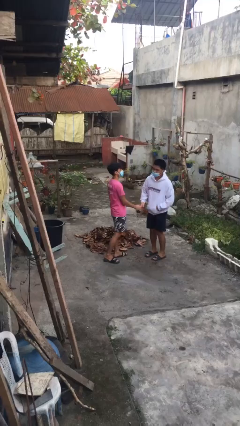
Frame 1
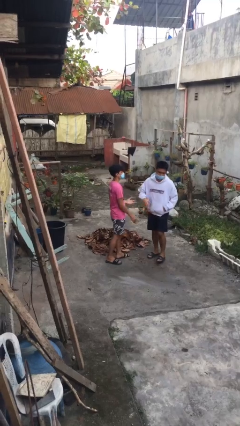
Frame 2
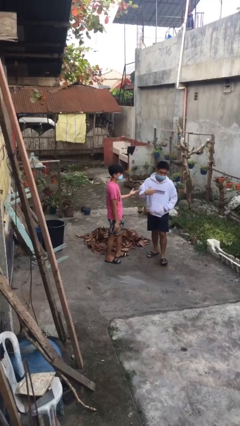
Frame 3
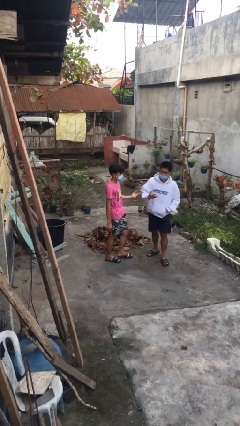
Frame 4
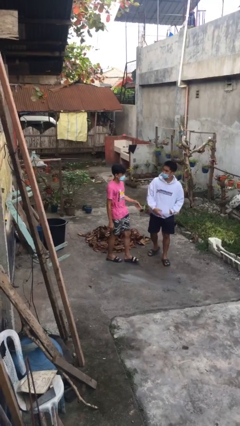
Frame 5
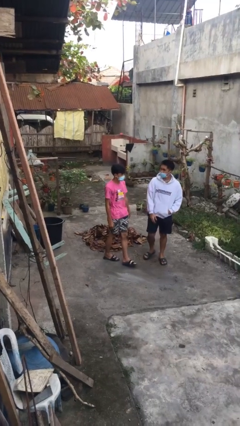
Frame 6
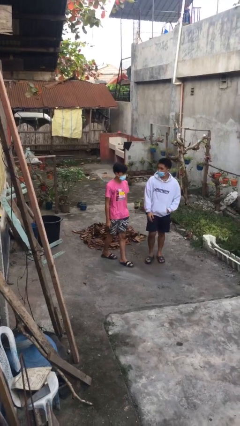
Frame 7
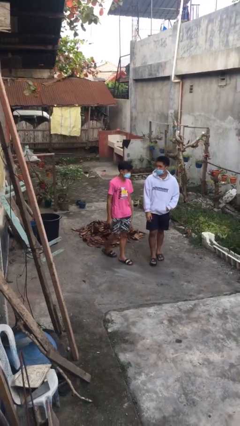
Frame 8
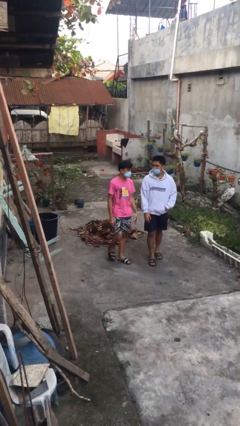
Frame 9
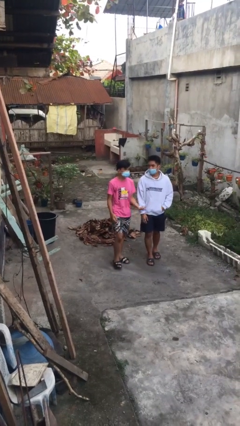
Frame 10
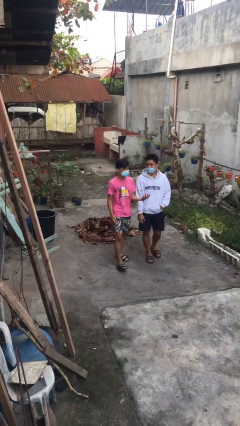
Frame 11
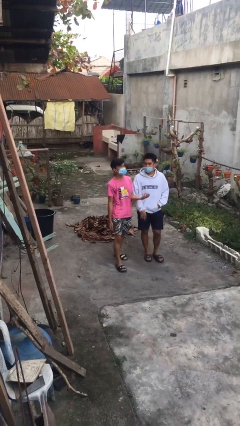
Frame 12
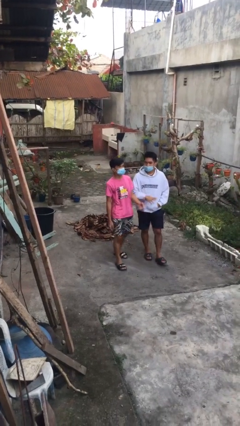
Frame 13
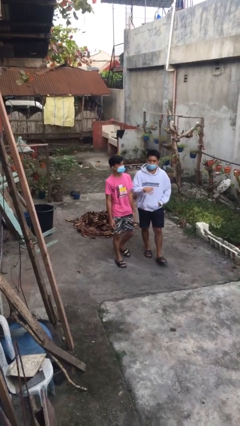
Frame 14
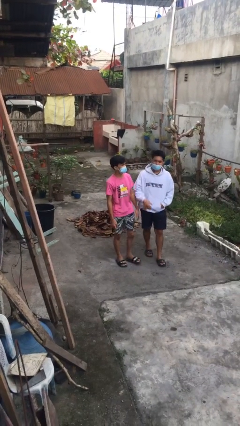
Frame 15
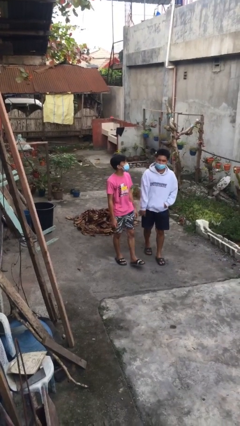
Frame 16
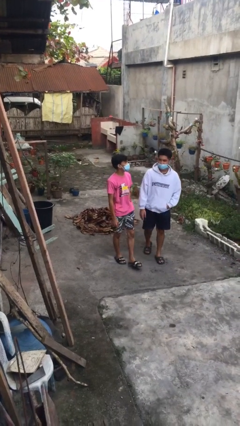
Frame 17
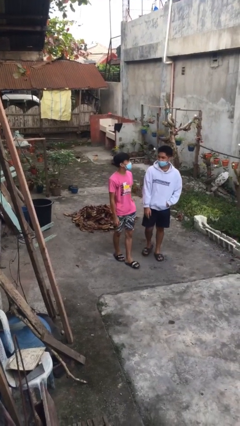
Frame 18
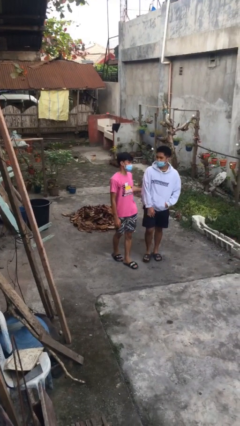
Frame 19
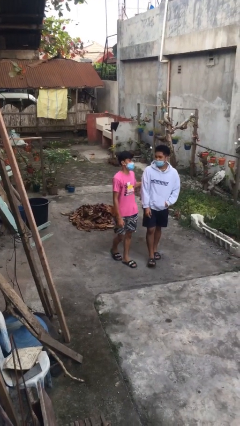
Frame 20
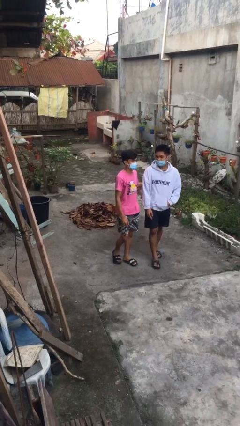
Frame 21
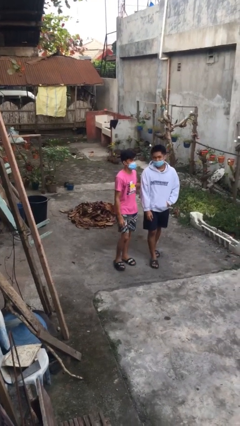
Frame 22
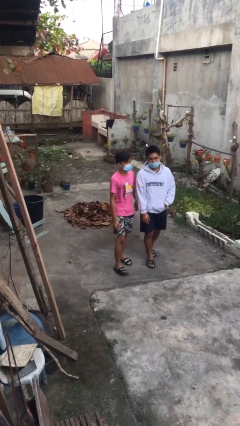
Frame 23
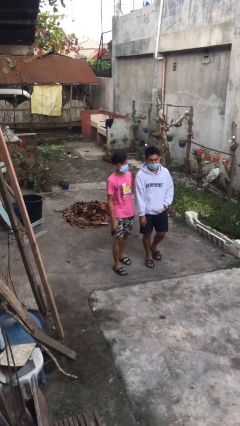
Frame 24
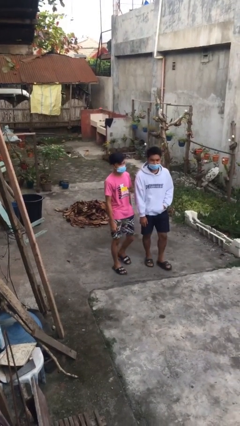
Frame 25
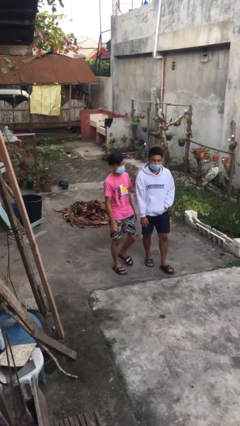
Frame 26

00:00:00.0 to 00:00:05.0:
person talks to person

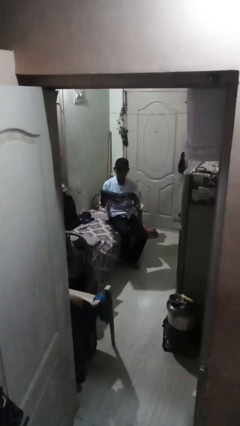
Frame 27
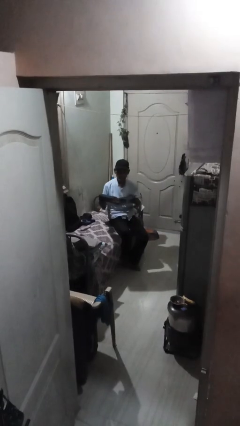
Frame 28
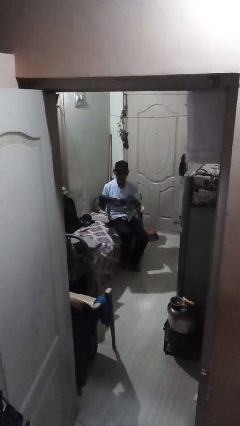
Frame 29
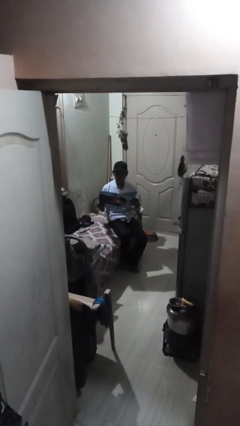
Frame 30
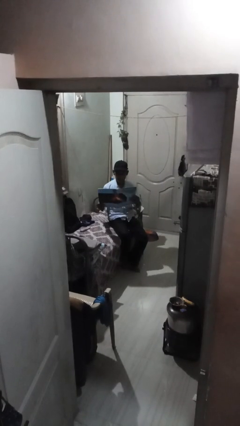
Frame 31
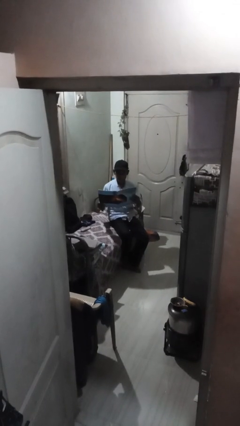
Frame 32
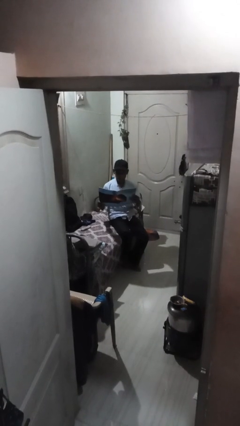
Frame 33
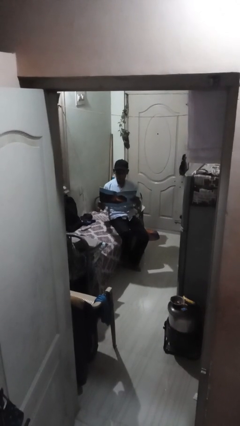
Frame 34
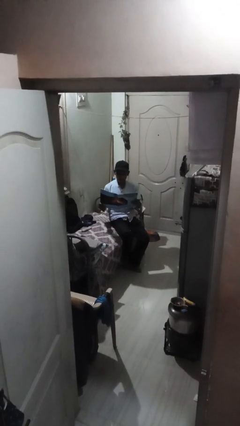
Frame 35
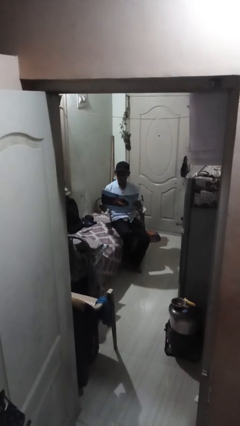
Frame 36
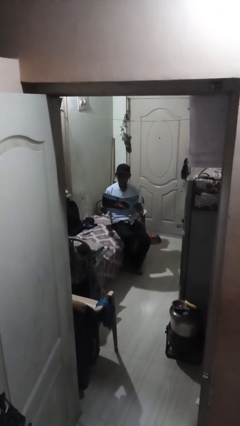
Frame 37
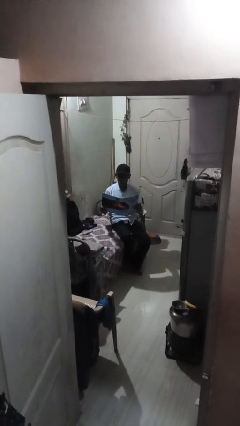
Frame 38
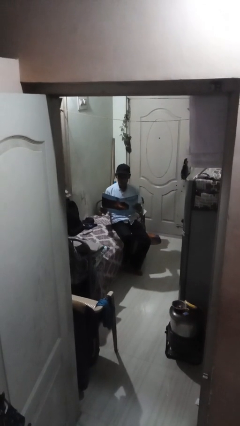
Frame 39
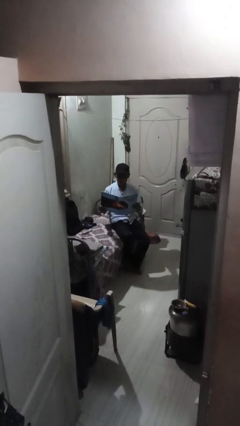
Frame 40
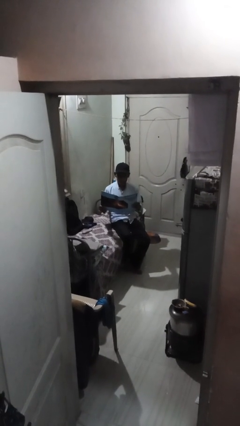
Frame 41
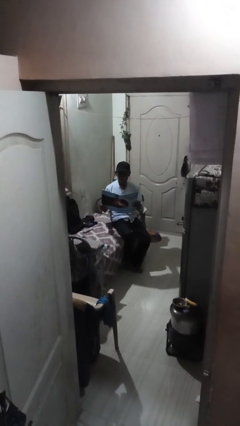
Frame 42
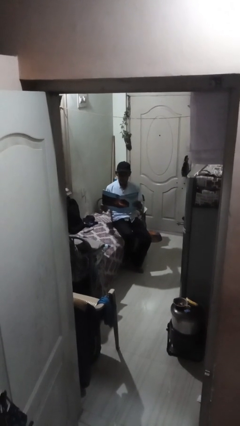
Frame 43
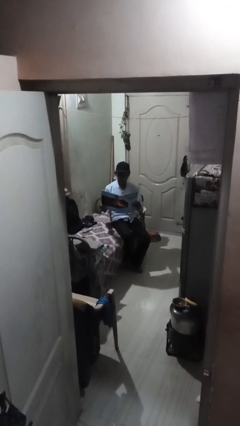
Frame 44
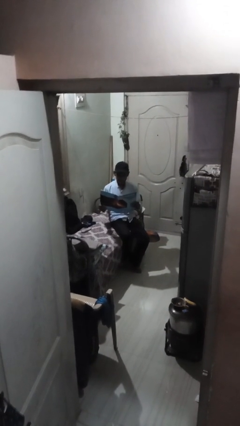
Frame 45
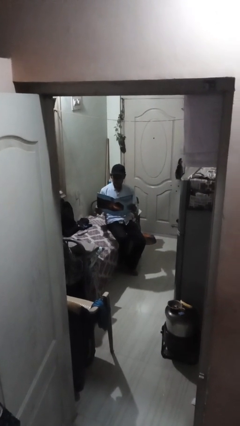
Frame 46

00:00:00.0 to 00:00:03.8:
person reads magazine

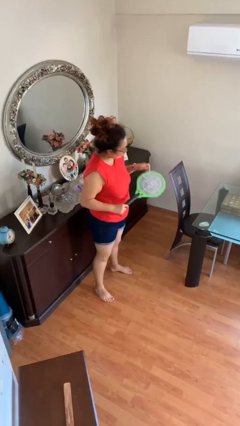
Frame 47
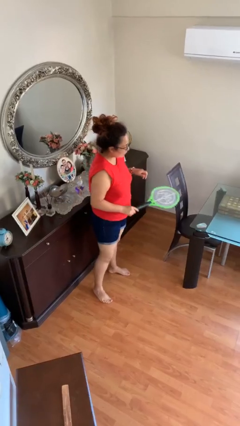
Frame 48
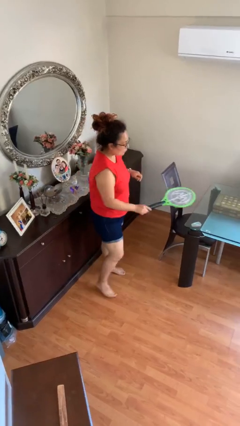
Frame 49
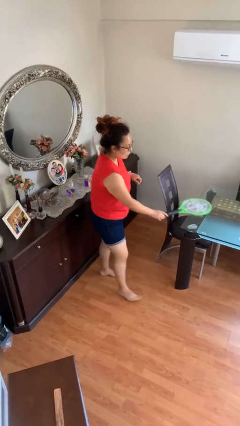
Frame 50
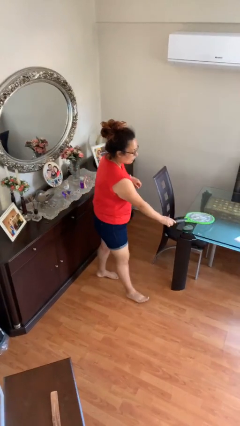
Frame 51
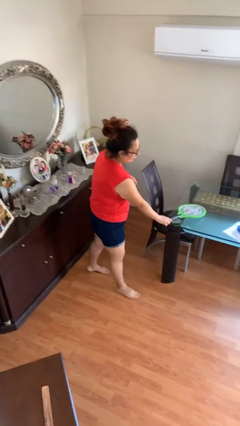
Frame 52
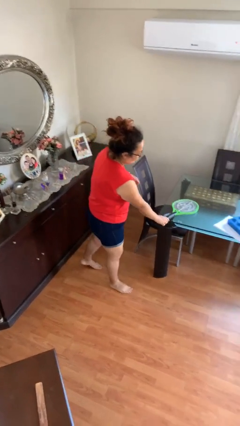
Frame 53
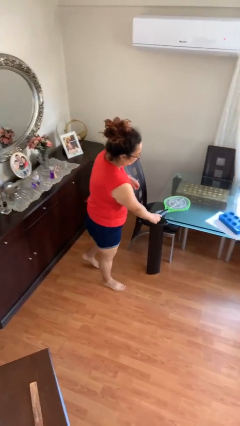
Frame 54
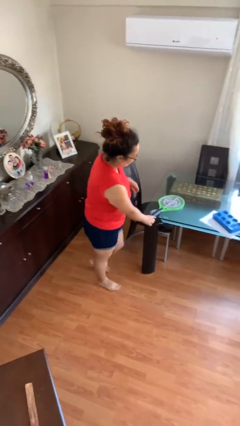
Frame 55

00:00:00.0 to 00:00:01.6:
person puts down object on table

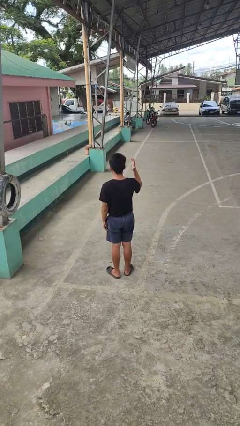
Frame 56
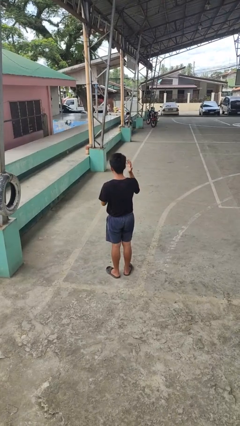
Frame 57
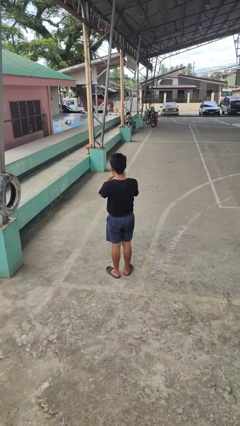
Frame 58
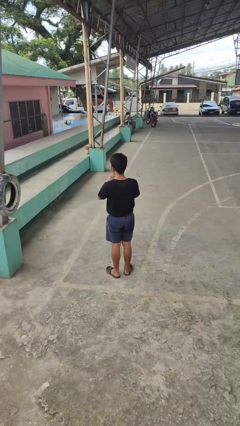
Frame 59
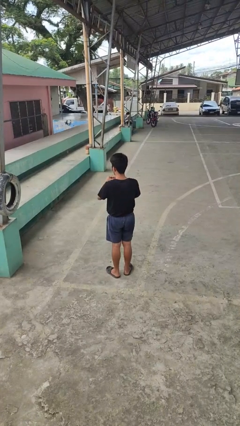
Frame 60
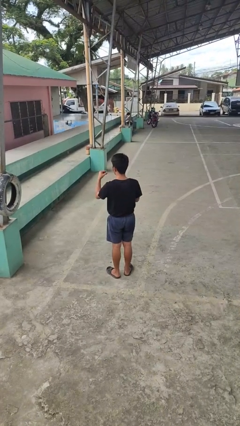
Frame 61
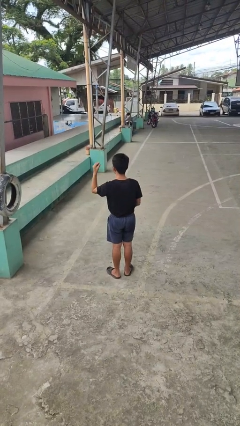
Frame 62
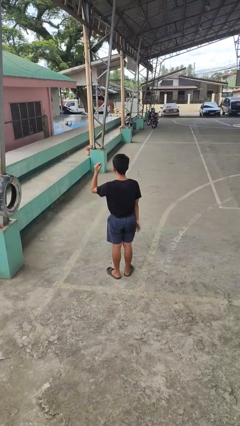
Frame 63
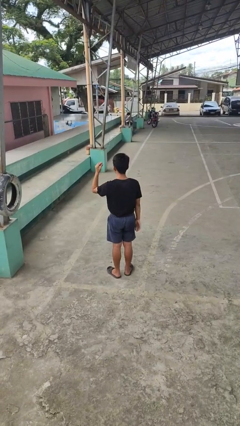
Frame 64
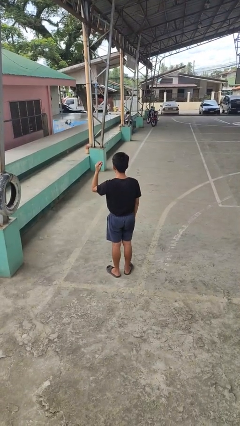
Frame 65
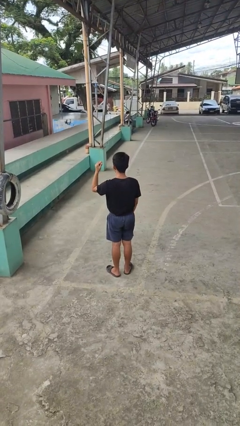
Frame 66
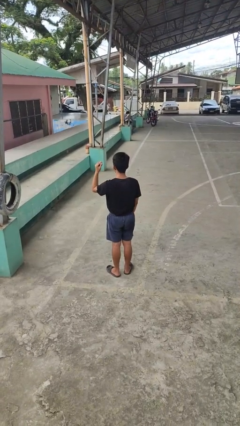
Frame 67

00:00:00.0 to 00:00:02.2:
person takes off ring

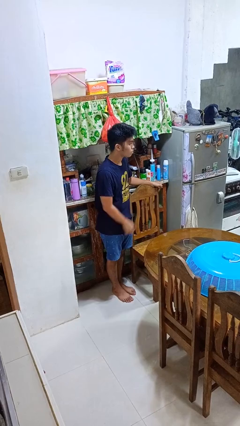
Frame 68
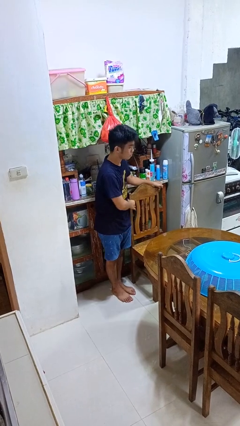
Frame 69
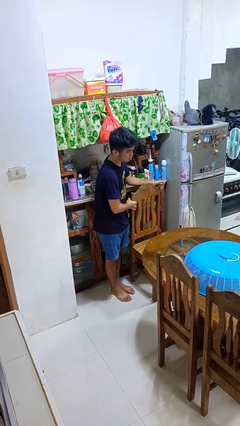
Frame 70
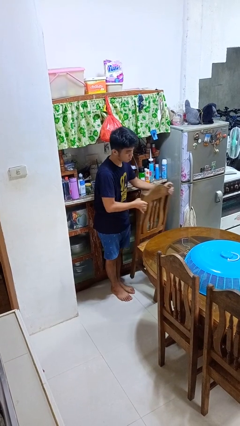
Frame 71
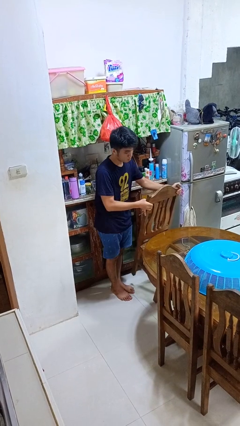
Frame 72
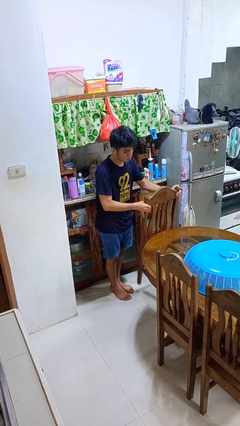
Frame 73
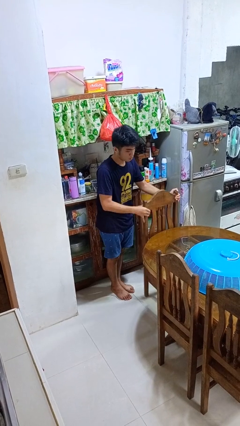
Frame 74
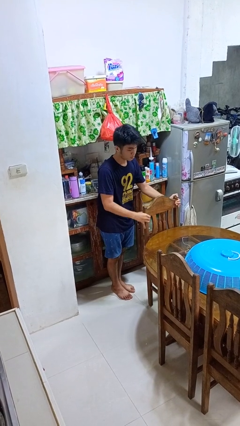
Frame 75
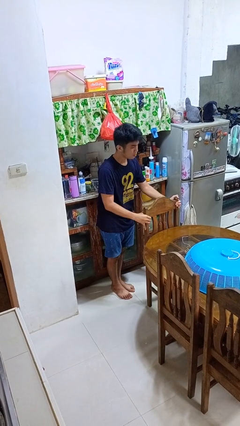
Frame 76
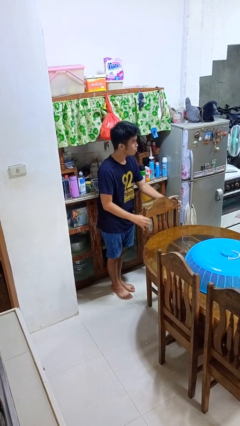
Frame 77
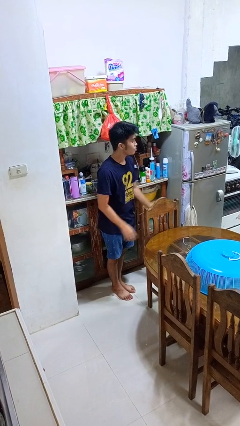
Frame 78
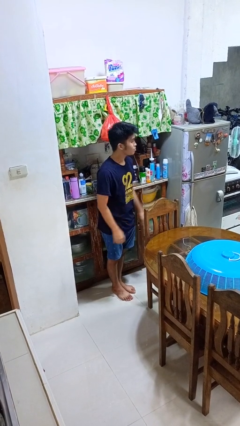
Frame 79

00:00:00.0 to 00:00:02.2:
person pushes in chair

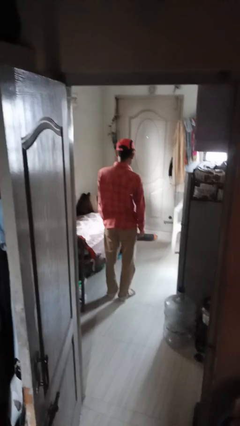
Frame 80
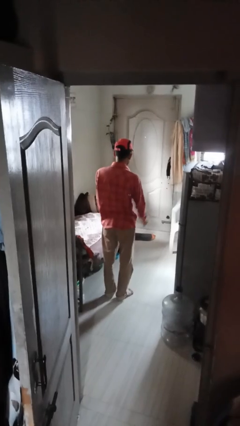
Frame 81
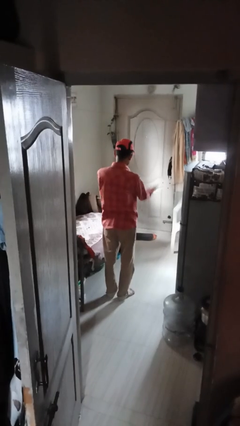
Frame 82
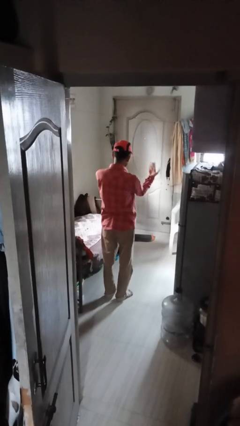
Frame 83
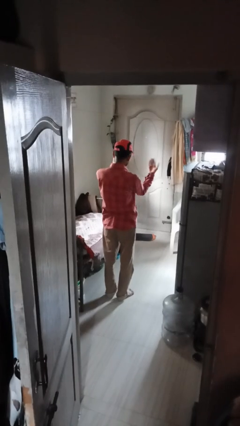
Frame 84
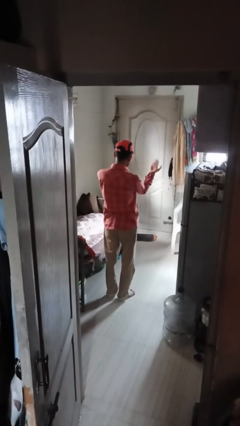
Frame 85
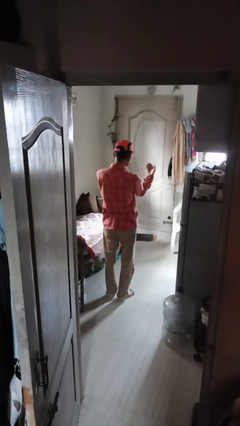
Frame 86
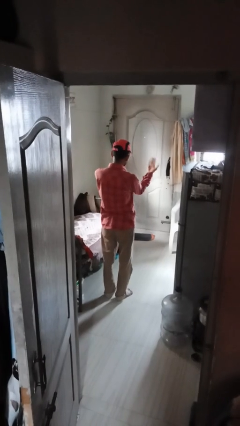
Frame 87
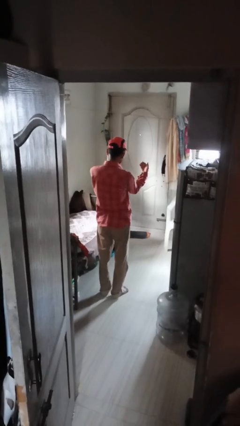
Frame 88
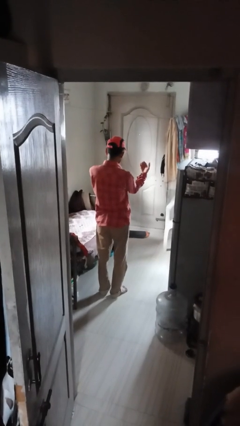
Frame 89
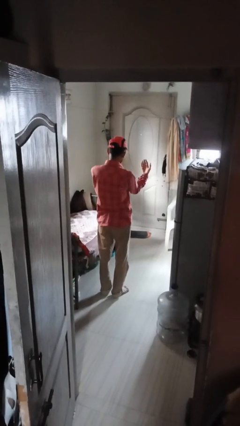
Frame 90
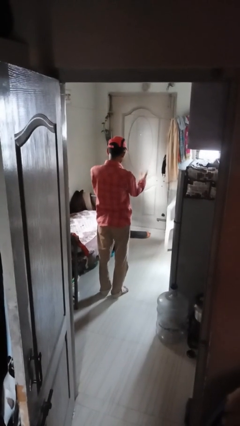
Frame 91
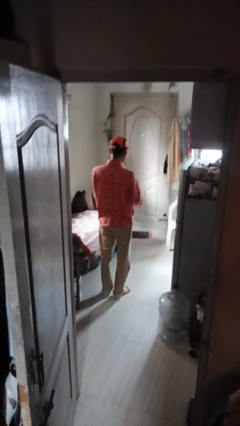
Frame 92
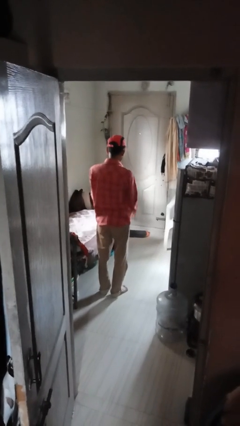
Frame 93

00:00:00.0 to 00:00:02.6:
person gestures come here

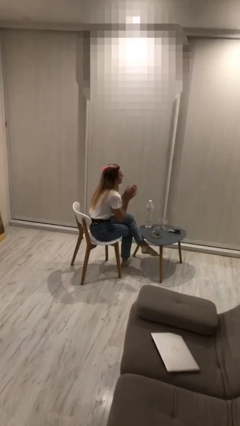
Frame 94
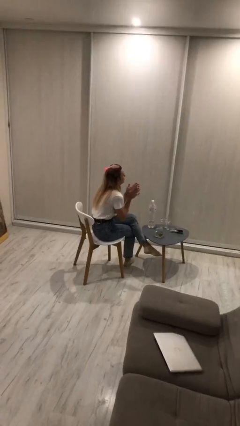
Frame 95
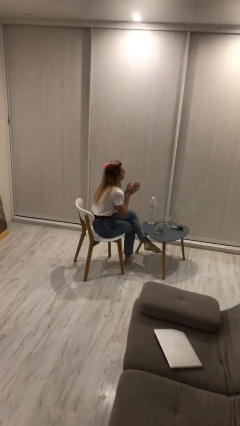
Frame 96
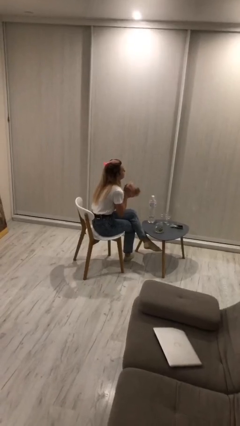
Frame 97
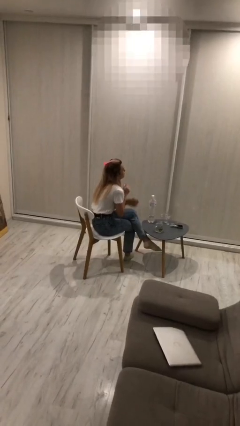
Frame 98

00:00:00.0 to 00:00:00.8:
person claps hands
